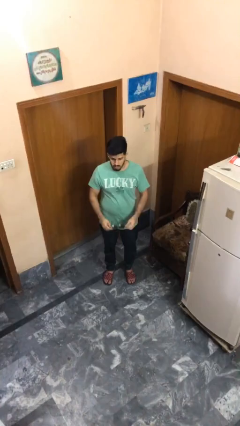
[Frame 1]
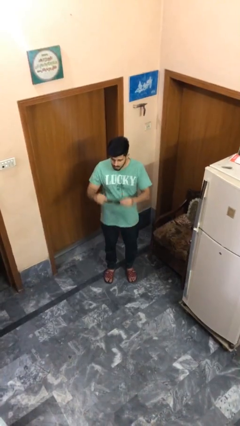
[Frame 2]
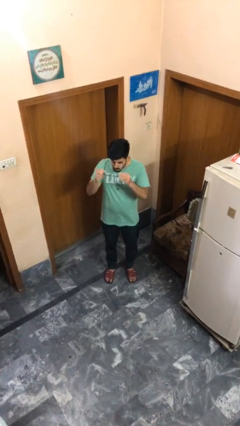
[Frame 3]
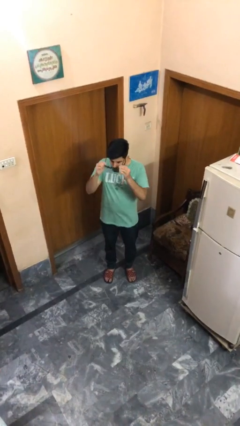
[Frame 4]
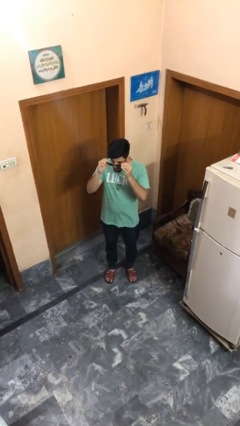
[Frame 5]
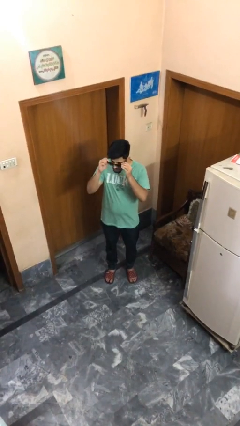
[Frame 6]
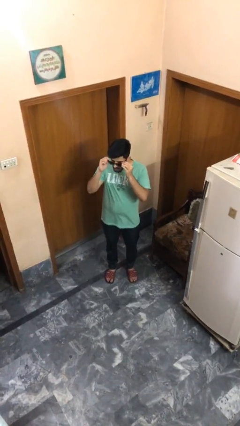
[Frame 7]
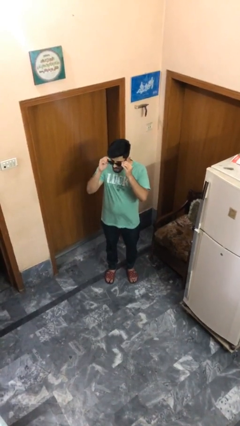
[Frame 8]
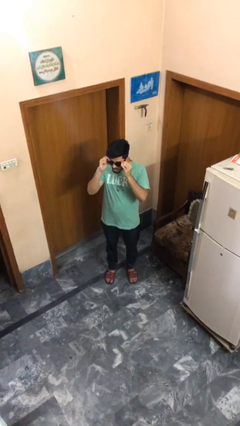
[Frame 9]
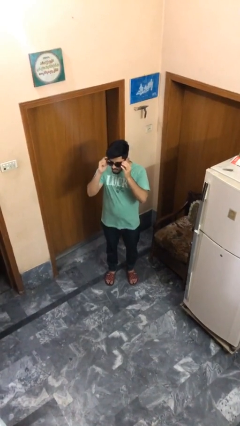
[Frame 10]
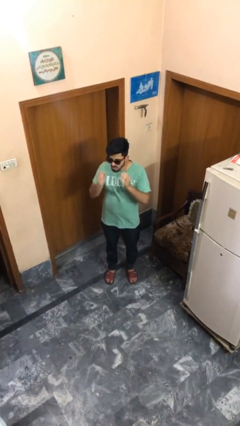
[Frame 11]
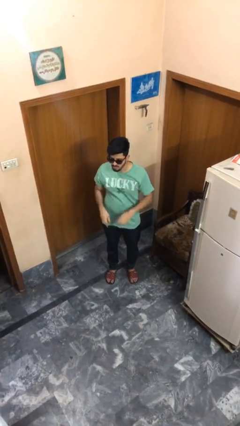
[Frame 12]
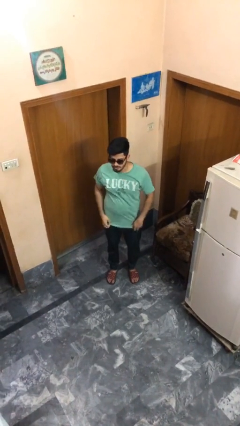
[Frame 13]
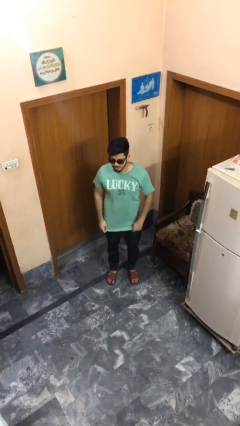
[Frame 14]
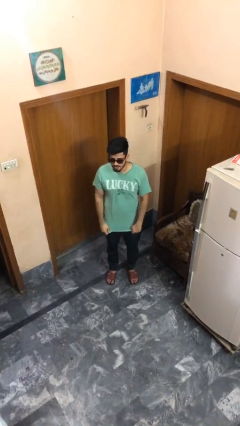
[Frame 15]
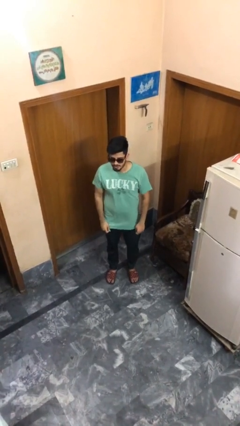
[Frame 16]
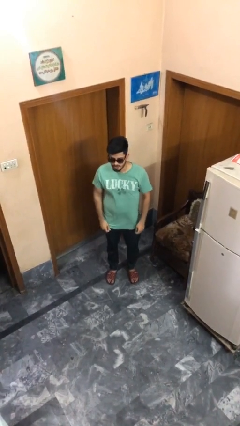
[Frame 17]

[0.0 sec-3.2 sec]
person puts on sunglasses

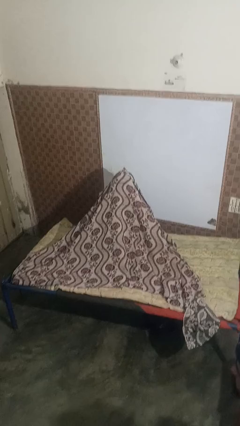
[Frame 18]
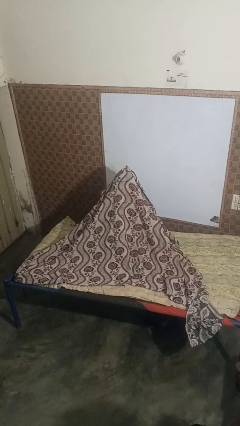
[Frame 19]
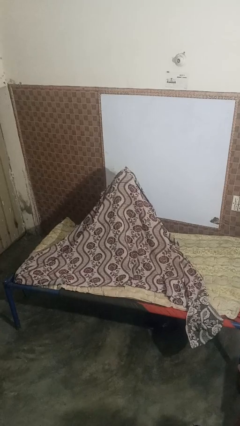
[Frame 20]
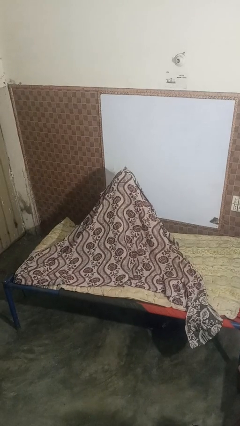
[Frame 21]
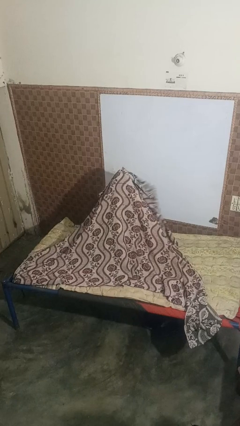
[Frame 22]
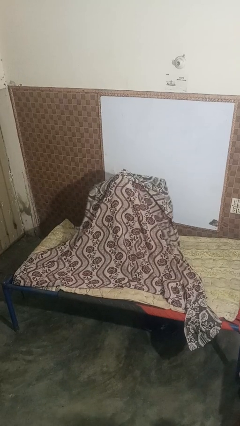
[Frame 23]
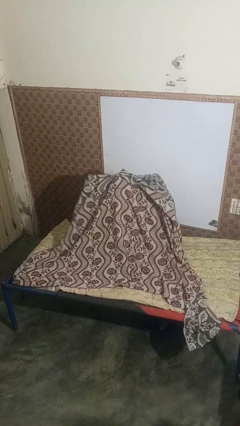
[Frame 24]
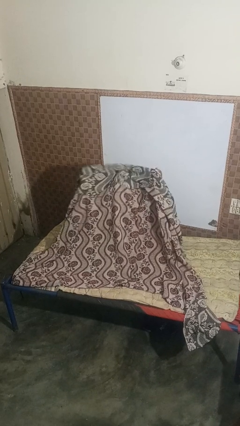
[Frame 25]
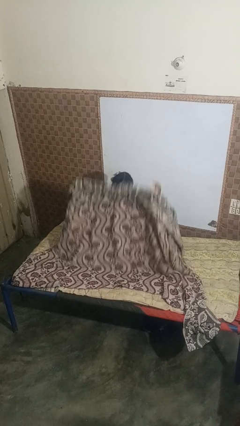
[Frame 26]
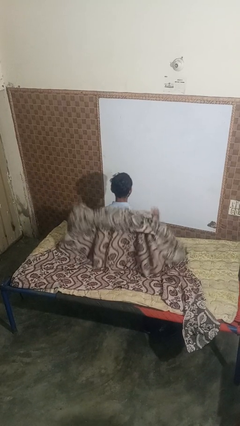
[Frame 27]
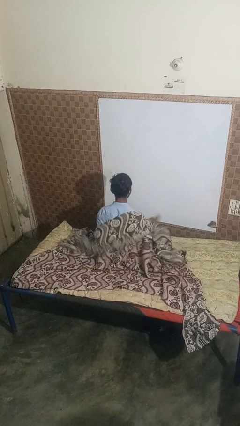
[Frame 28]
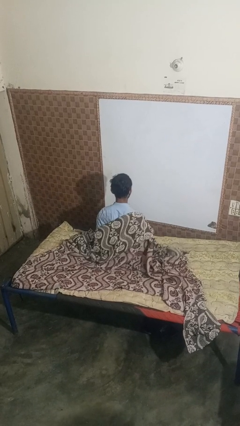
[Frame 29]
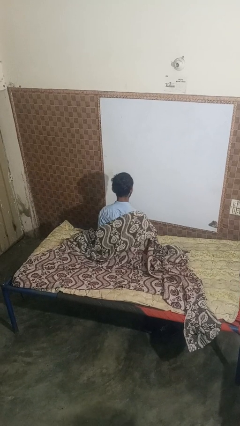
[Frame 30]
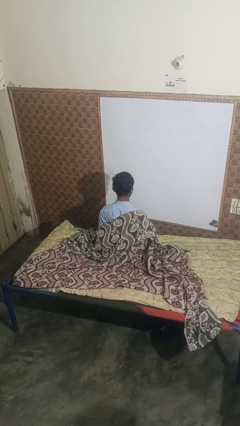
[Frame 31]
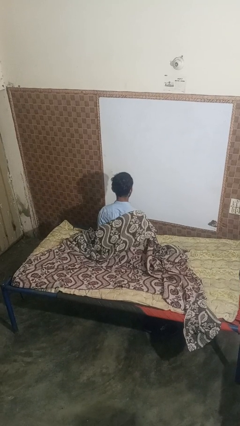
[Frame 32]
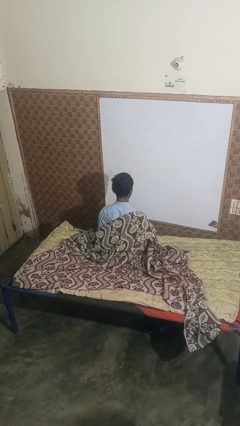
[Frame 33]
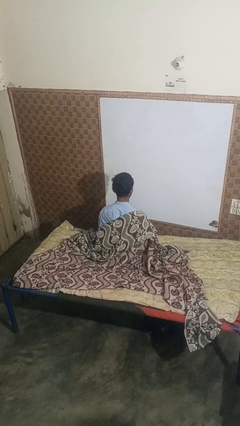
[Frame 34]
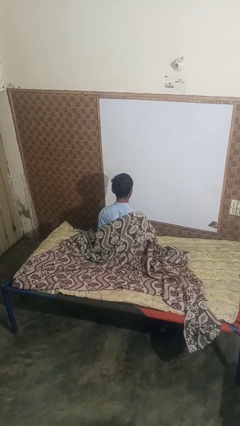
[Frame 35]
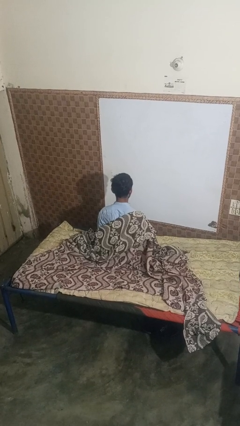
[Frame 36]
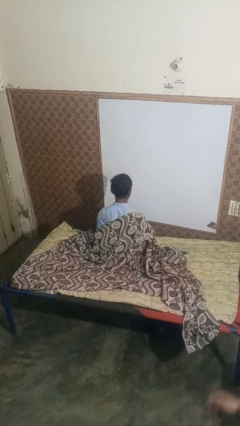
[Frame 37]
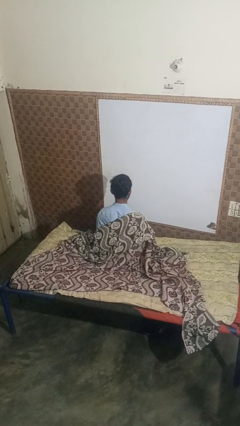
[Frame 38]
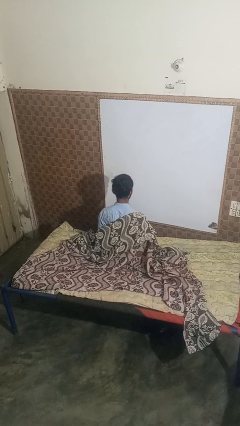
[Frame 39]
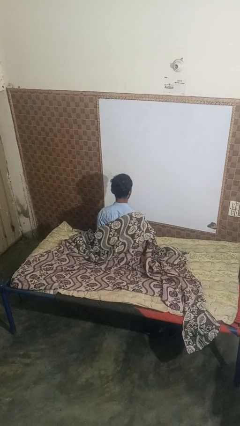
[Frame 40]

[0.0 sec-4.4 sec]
person uncovers with blanket

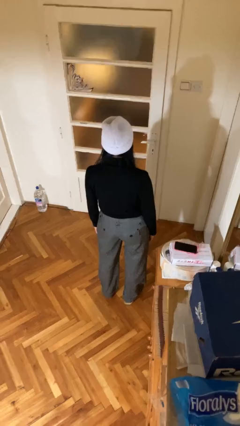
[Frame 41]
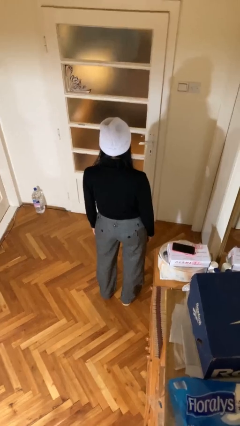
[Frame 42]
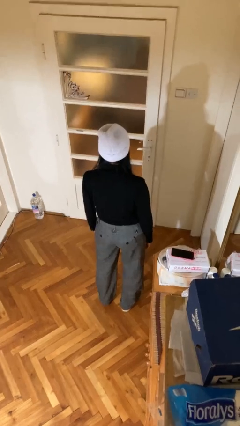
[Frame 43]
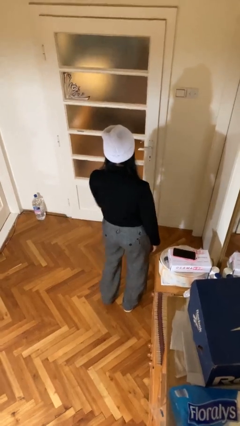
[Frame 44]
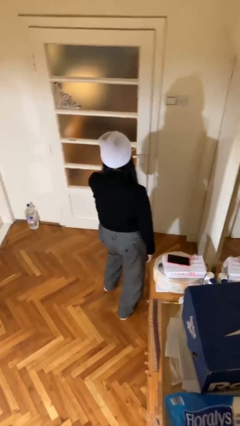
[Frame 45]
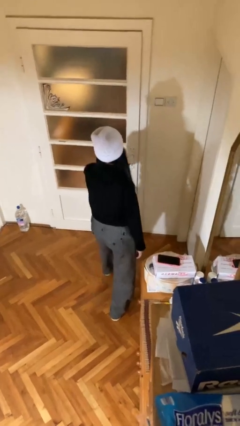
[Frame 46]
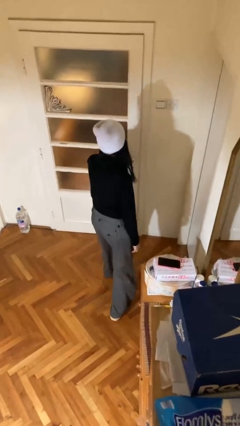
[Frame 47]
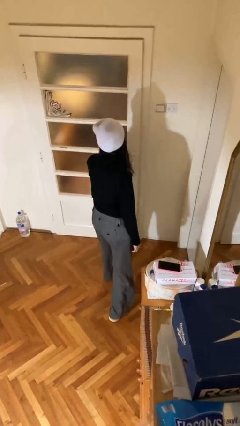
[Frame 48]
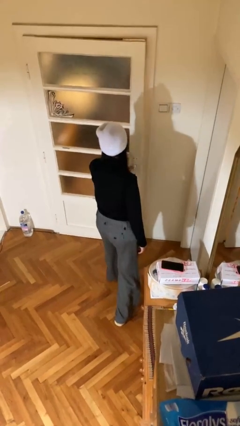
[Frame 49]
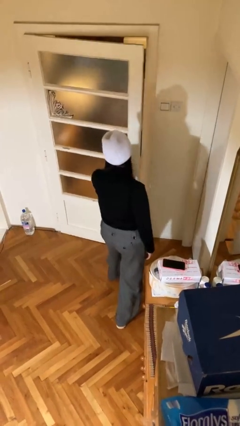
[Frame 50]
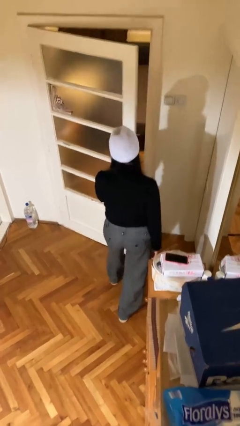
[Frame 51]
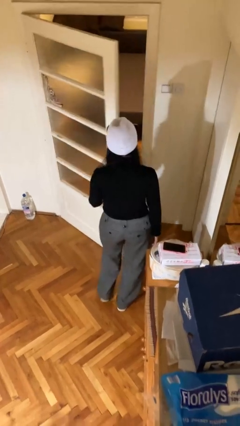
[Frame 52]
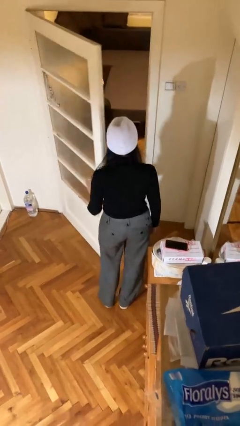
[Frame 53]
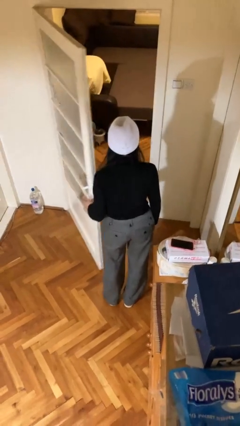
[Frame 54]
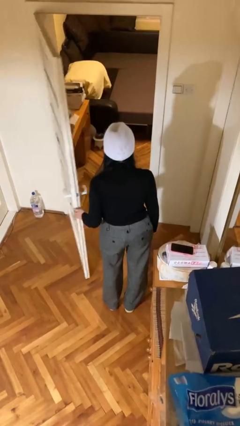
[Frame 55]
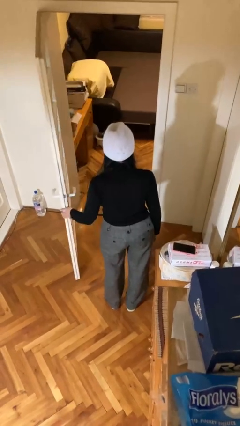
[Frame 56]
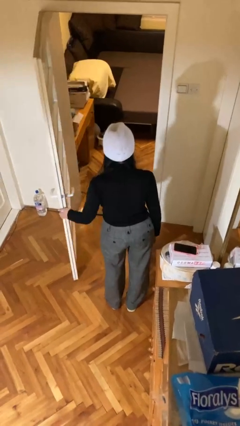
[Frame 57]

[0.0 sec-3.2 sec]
person opens facility door

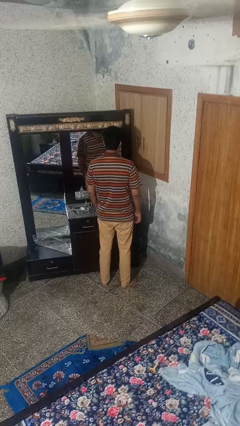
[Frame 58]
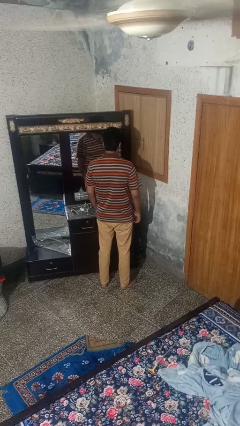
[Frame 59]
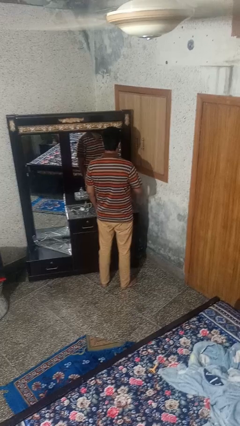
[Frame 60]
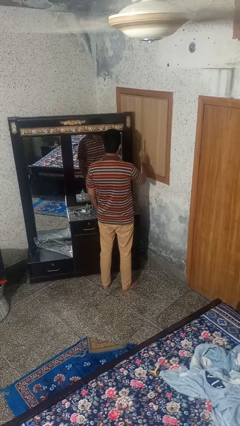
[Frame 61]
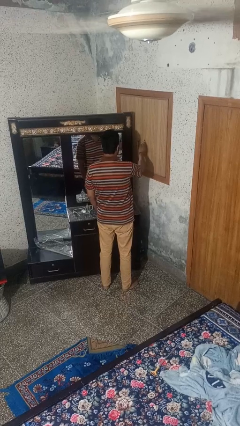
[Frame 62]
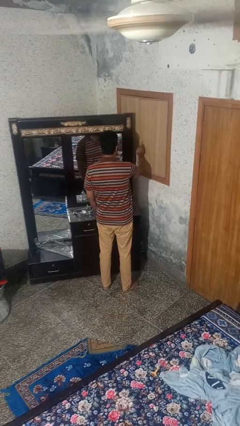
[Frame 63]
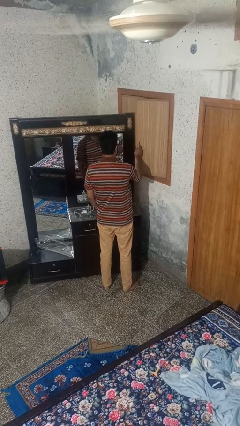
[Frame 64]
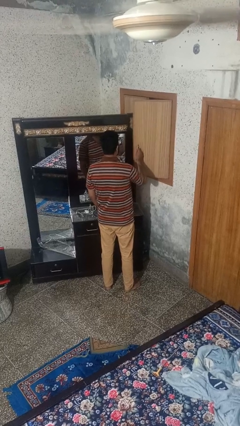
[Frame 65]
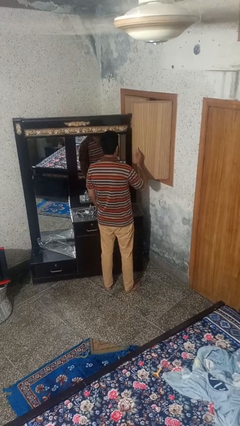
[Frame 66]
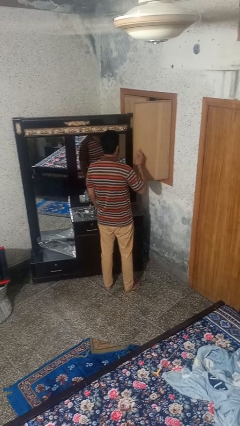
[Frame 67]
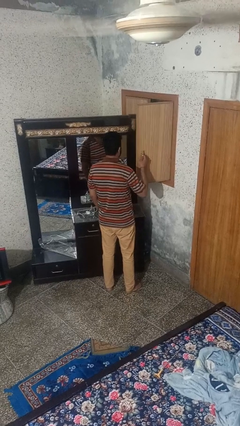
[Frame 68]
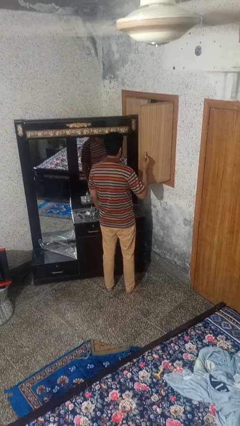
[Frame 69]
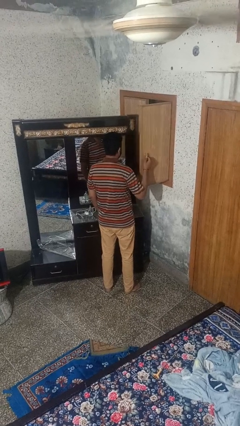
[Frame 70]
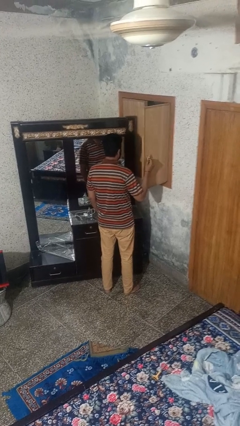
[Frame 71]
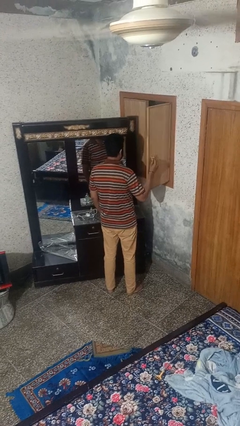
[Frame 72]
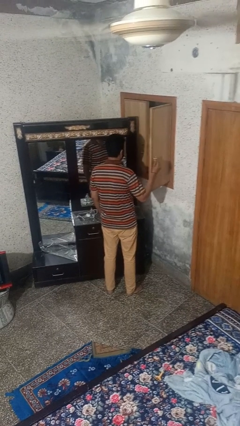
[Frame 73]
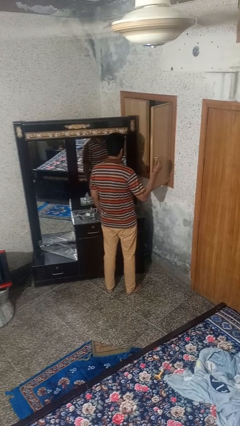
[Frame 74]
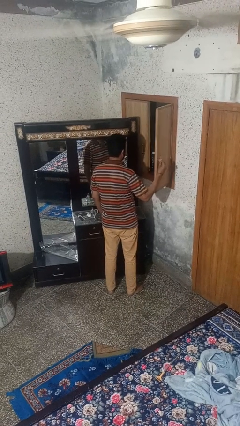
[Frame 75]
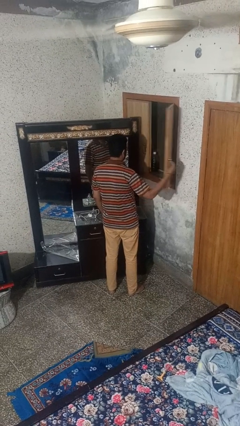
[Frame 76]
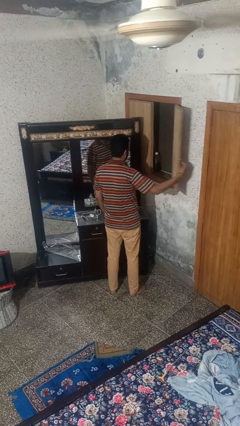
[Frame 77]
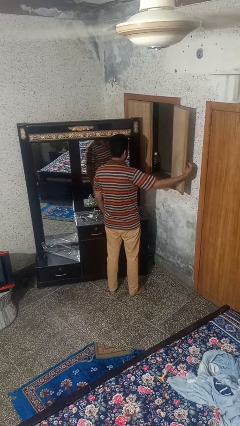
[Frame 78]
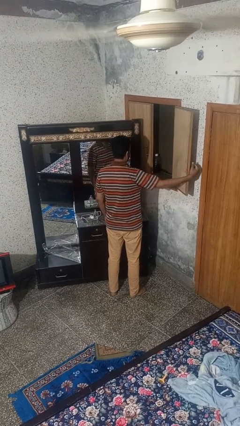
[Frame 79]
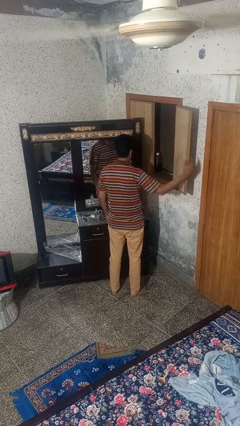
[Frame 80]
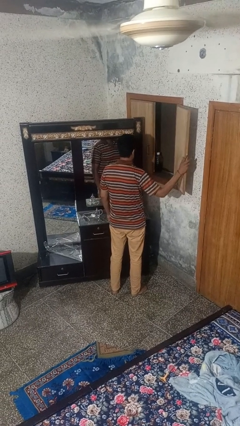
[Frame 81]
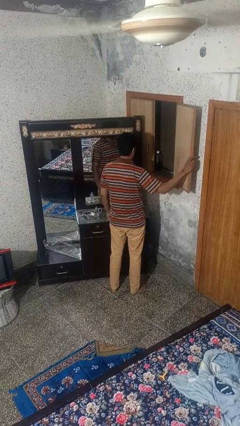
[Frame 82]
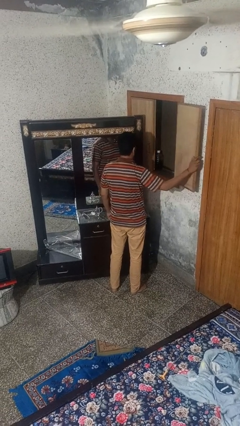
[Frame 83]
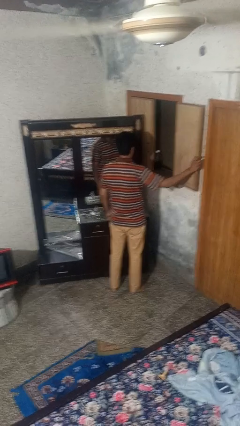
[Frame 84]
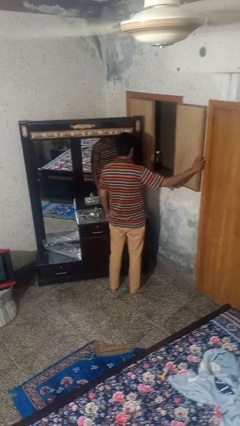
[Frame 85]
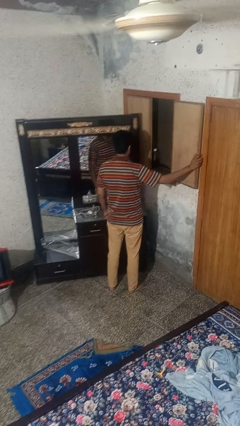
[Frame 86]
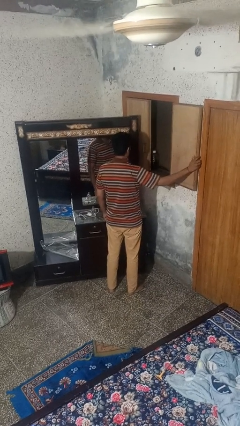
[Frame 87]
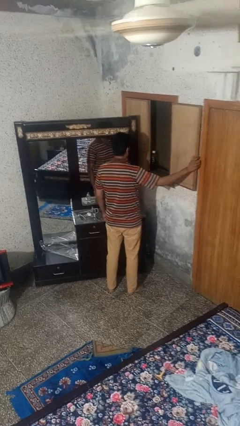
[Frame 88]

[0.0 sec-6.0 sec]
person opens home window

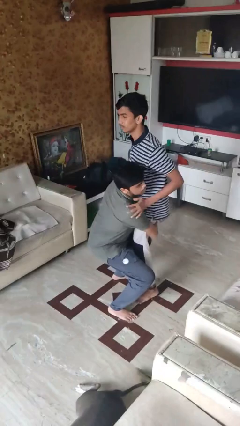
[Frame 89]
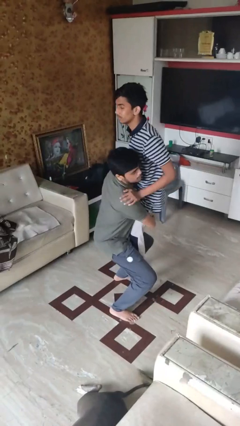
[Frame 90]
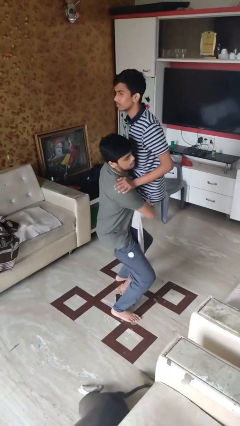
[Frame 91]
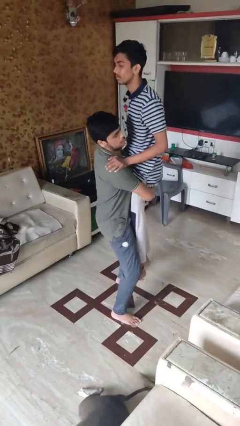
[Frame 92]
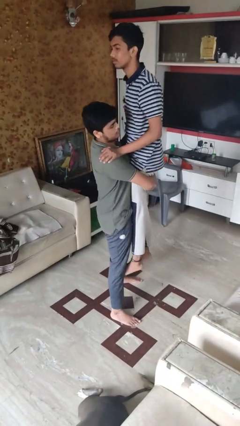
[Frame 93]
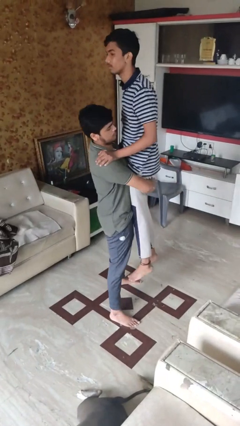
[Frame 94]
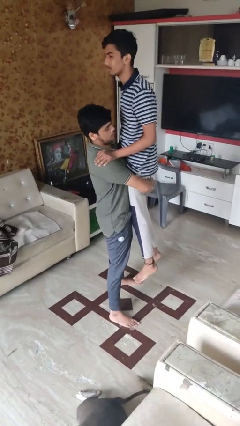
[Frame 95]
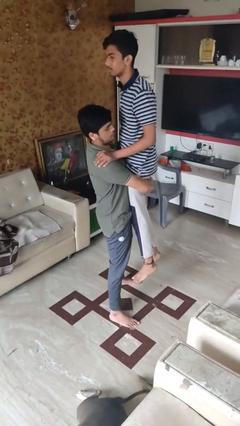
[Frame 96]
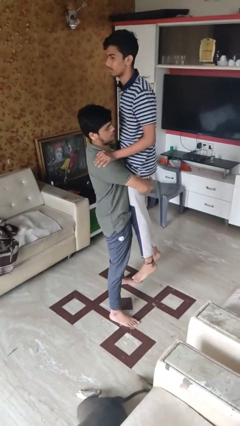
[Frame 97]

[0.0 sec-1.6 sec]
person picks up person
